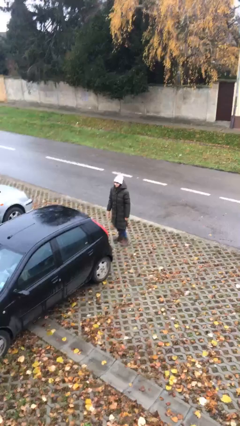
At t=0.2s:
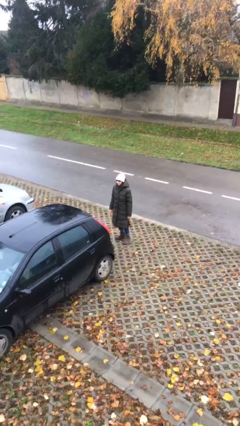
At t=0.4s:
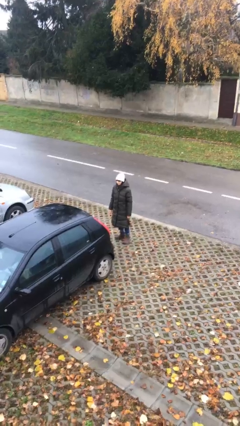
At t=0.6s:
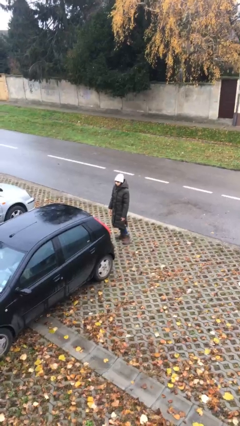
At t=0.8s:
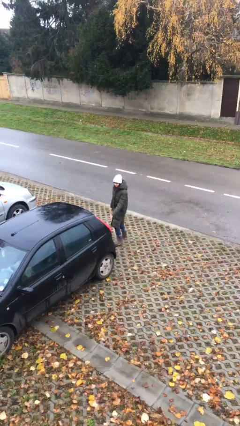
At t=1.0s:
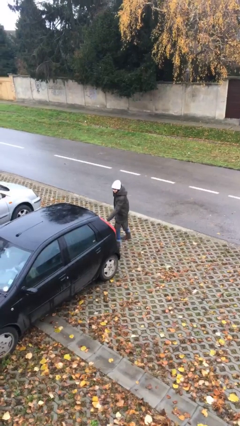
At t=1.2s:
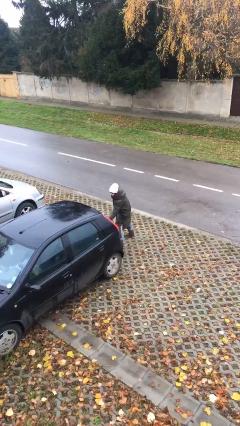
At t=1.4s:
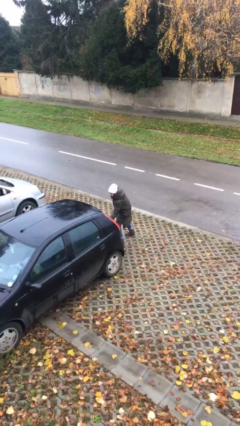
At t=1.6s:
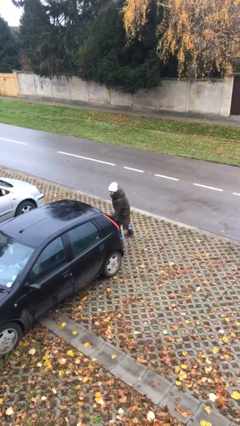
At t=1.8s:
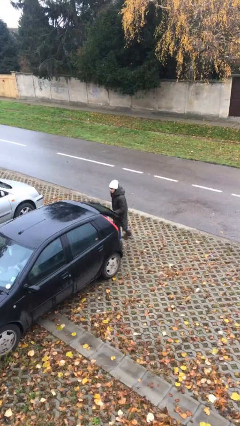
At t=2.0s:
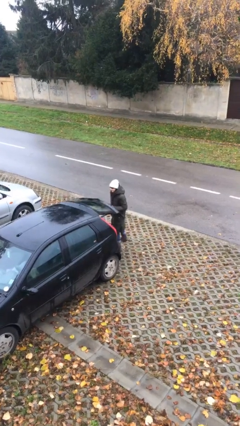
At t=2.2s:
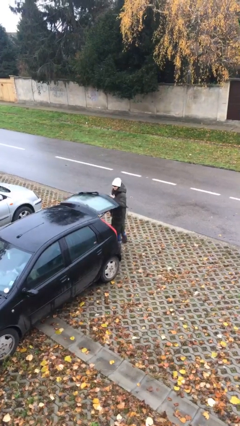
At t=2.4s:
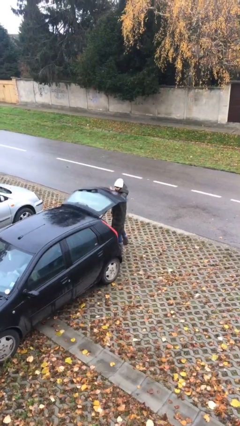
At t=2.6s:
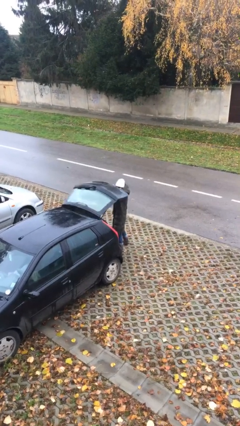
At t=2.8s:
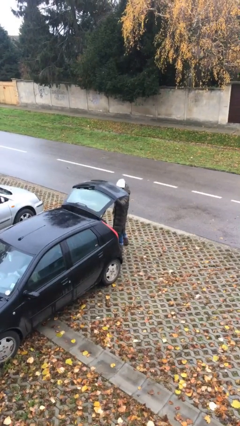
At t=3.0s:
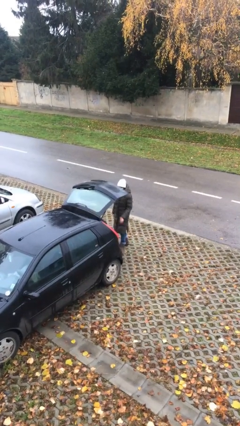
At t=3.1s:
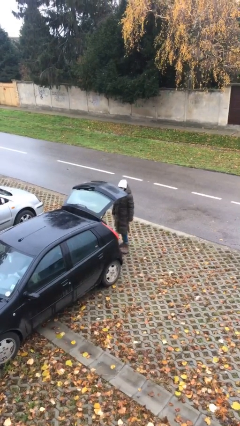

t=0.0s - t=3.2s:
person opens car trunk

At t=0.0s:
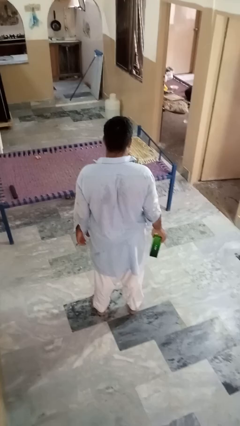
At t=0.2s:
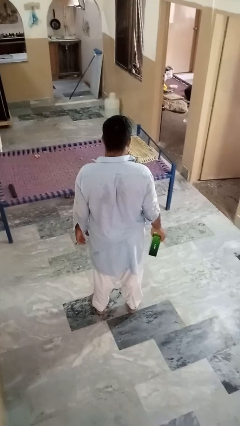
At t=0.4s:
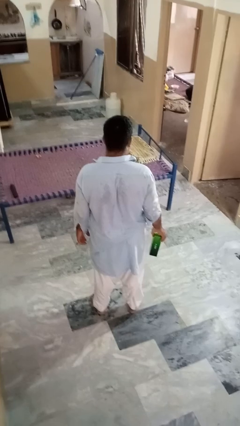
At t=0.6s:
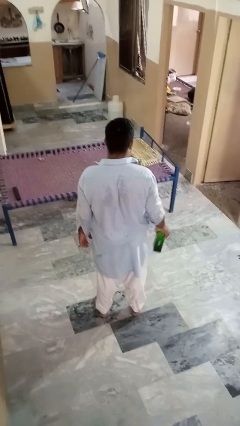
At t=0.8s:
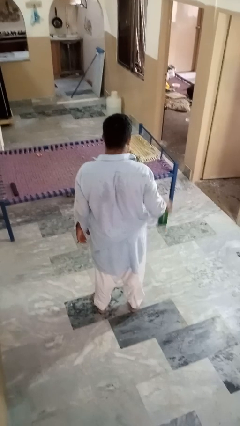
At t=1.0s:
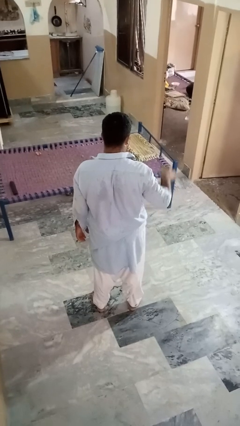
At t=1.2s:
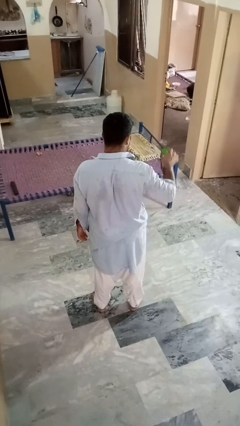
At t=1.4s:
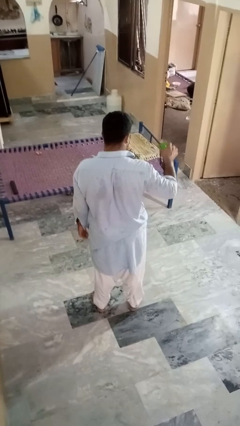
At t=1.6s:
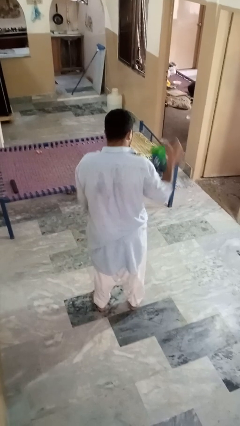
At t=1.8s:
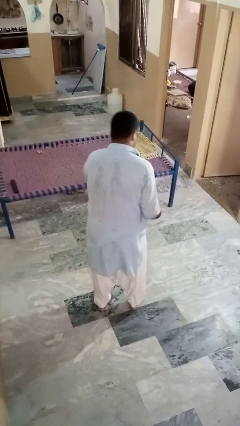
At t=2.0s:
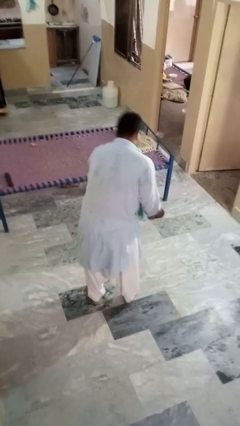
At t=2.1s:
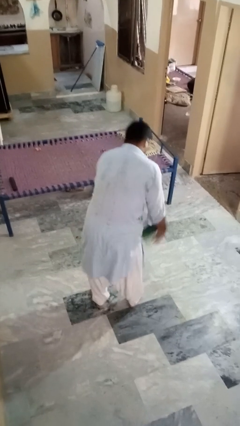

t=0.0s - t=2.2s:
person drops object

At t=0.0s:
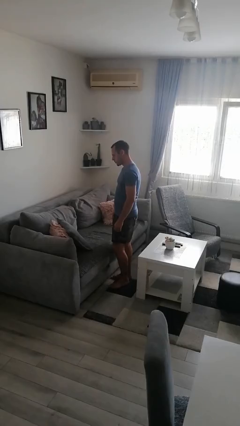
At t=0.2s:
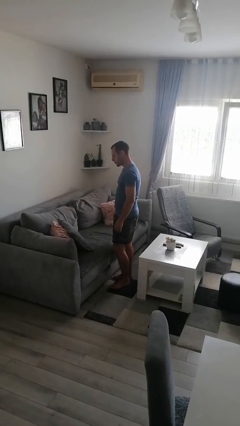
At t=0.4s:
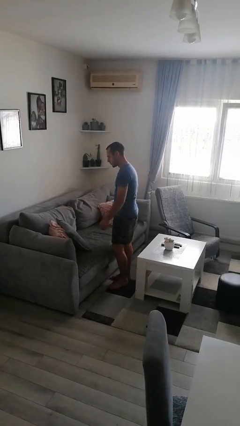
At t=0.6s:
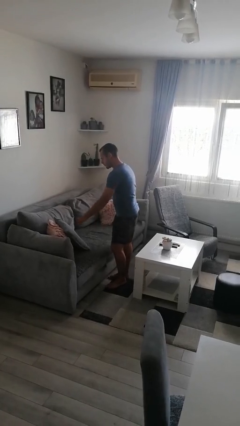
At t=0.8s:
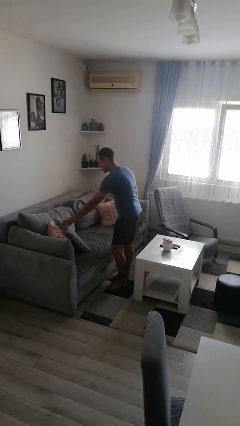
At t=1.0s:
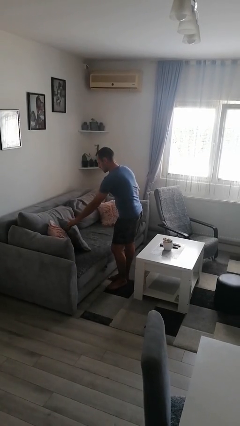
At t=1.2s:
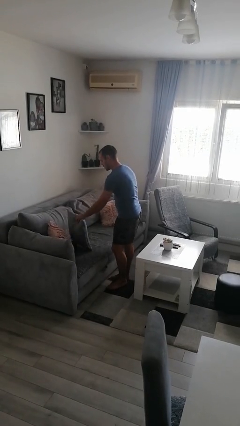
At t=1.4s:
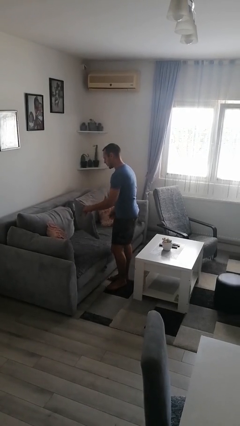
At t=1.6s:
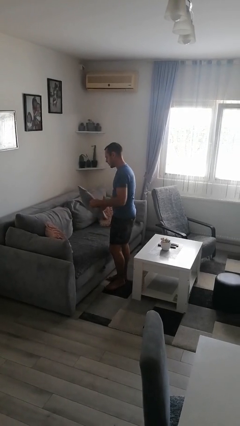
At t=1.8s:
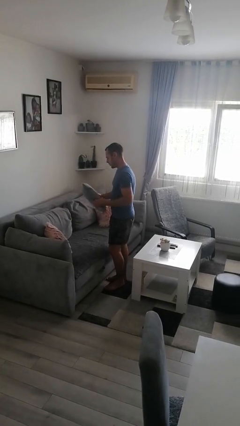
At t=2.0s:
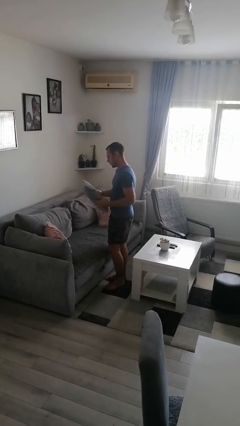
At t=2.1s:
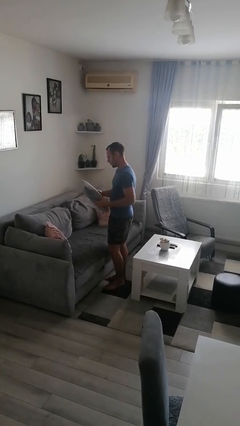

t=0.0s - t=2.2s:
person picks up object from couch

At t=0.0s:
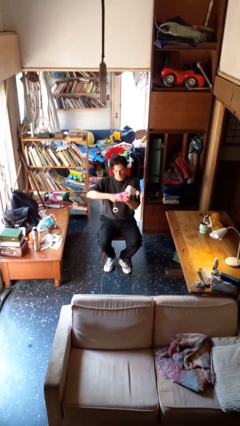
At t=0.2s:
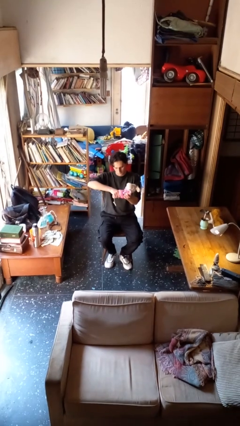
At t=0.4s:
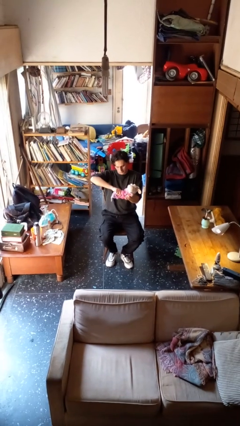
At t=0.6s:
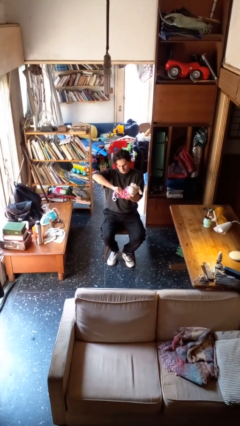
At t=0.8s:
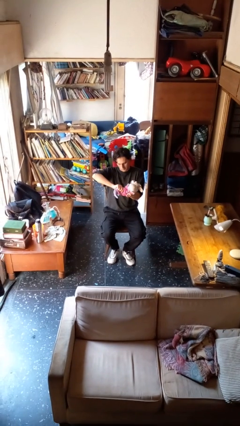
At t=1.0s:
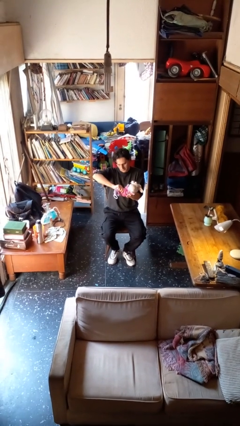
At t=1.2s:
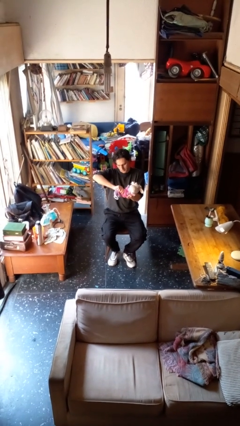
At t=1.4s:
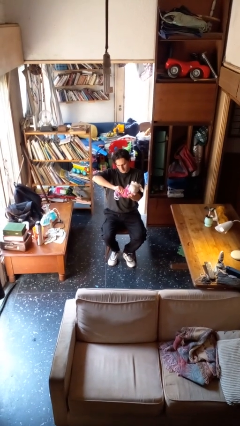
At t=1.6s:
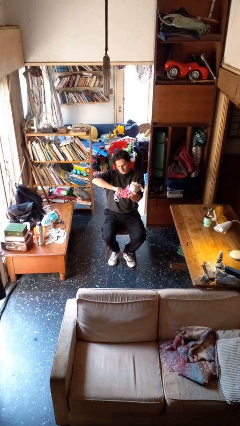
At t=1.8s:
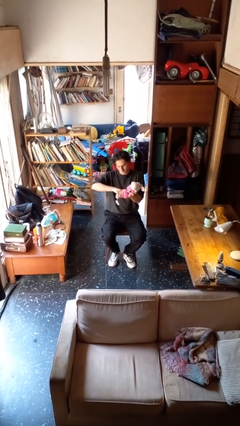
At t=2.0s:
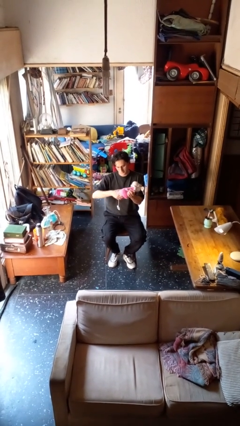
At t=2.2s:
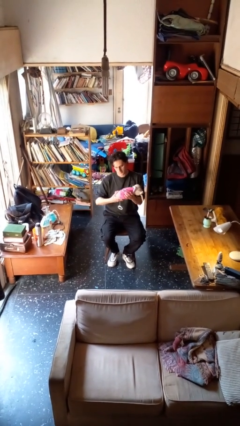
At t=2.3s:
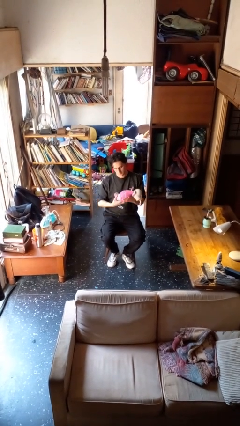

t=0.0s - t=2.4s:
person squeezes object

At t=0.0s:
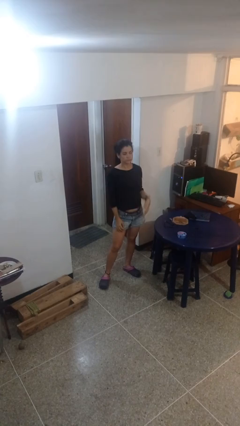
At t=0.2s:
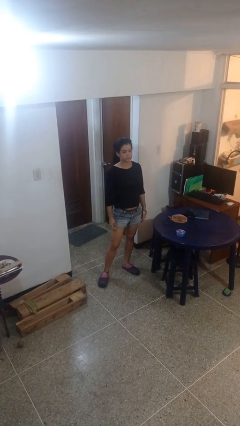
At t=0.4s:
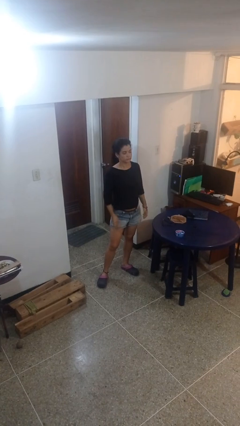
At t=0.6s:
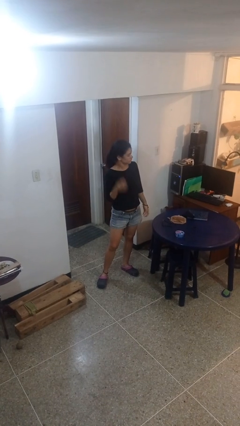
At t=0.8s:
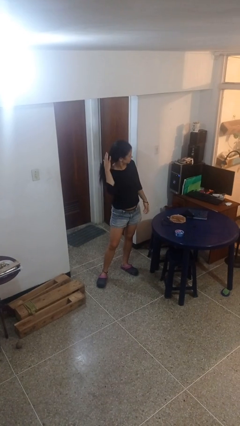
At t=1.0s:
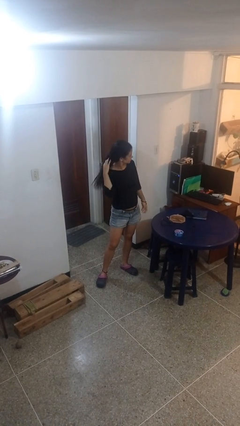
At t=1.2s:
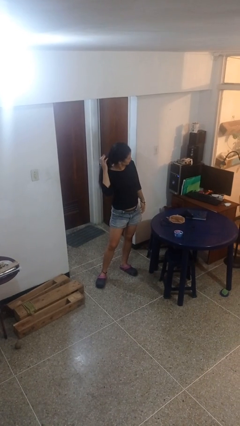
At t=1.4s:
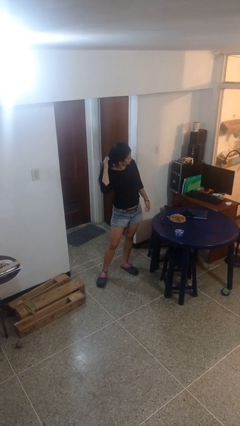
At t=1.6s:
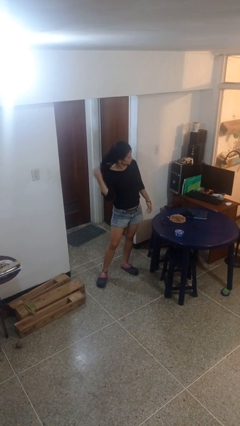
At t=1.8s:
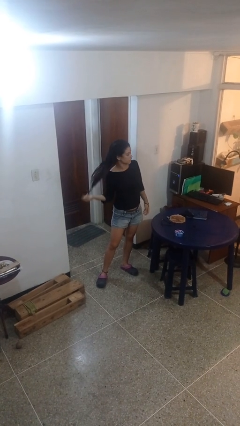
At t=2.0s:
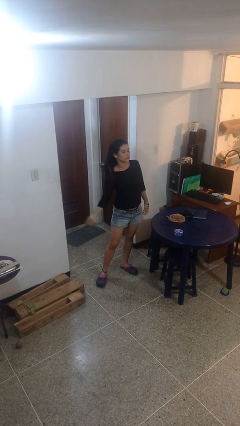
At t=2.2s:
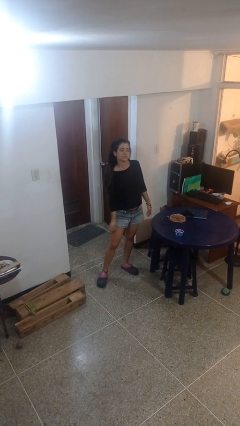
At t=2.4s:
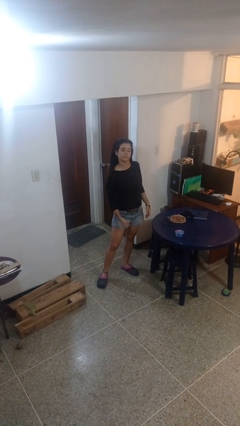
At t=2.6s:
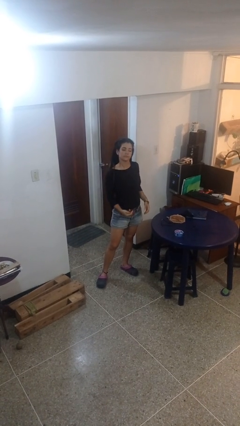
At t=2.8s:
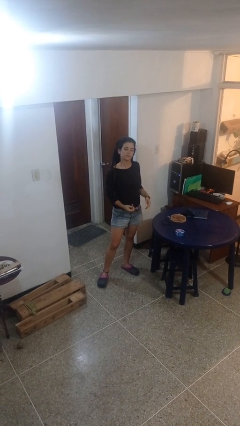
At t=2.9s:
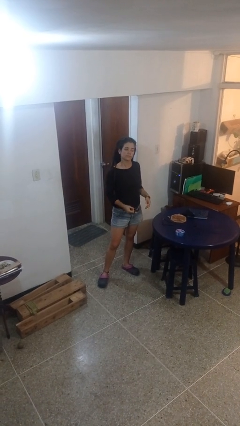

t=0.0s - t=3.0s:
person takes off hairtie

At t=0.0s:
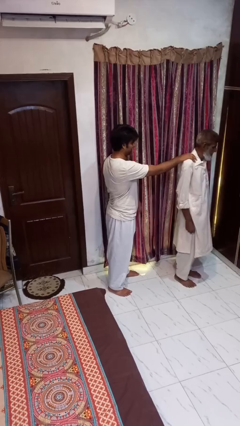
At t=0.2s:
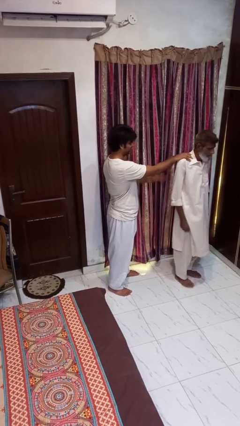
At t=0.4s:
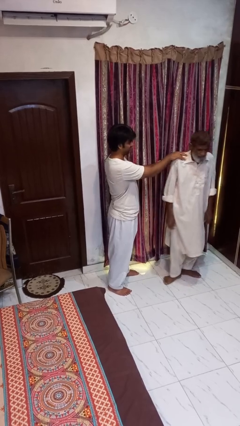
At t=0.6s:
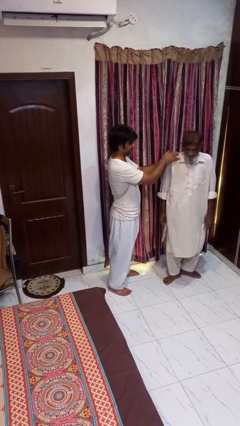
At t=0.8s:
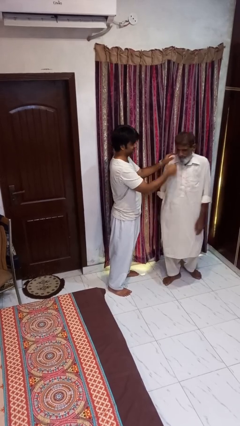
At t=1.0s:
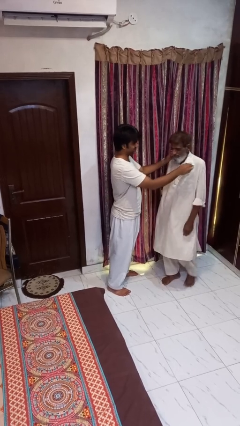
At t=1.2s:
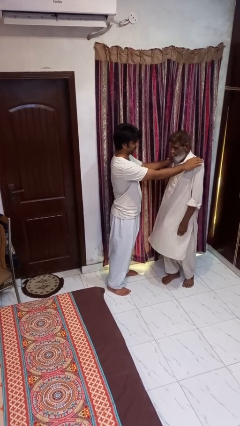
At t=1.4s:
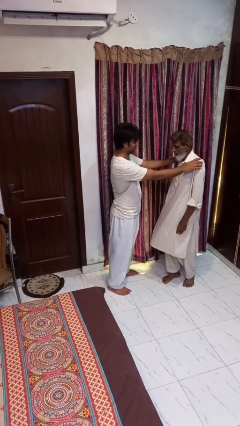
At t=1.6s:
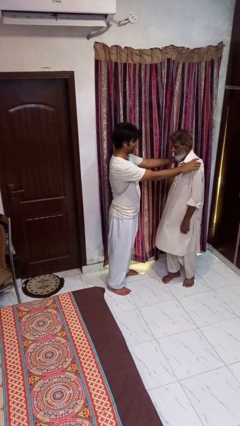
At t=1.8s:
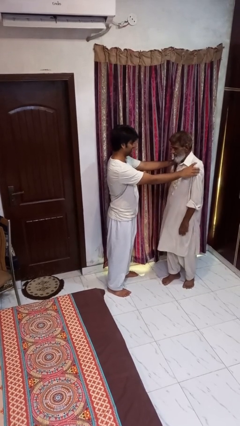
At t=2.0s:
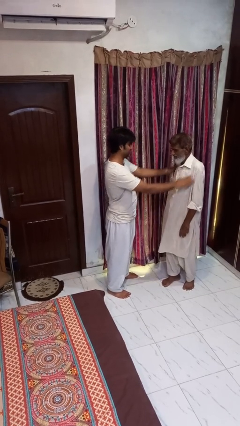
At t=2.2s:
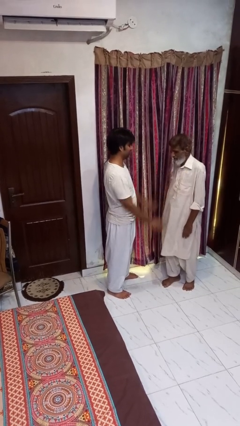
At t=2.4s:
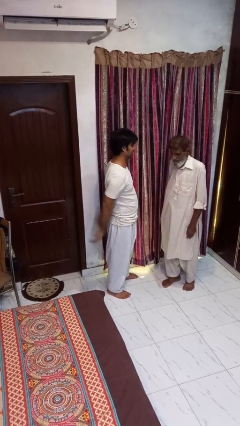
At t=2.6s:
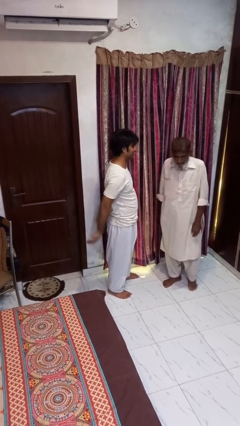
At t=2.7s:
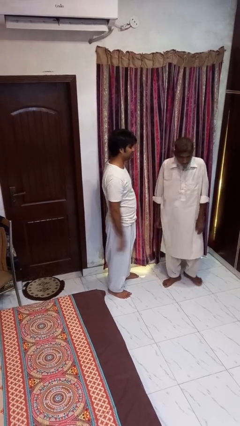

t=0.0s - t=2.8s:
person spins person around

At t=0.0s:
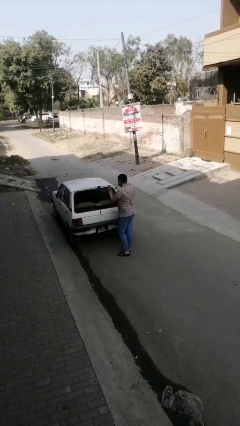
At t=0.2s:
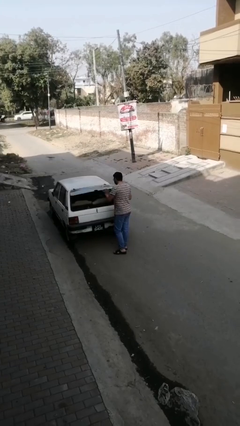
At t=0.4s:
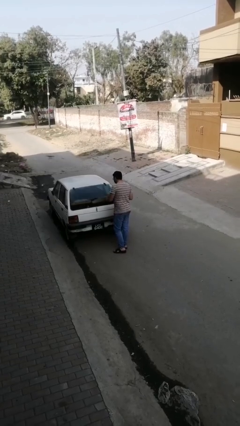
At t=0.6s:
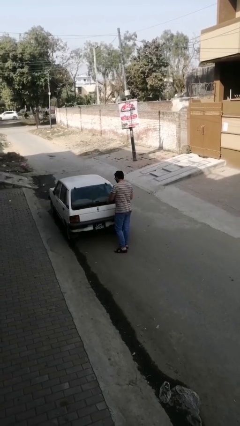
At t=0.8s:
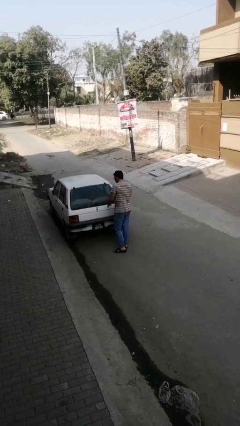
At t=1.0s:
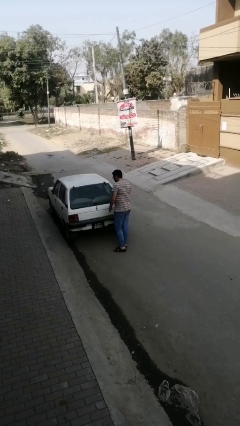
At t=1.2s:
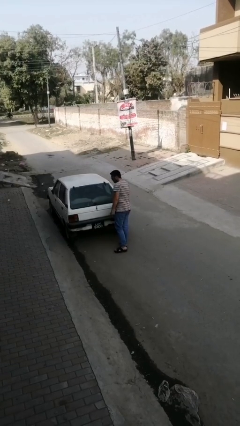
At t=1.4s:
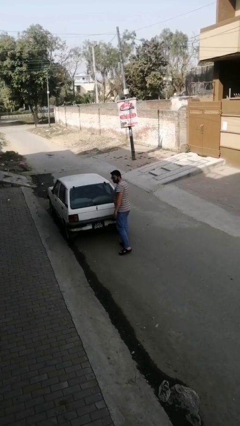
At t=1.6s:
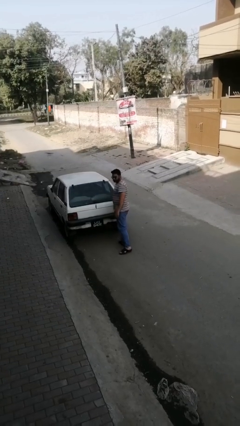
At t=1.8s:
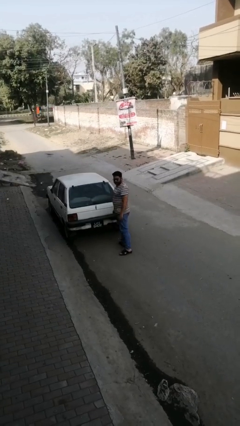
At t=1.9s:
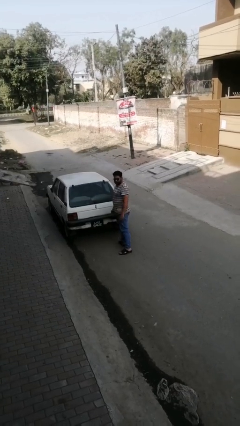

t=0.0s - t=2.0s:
person closes car trunk
